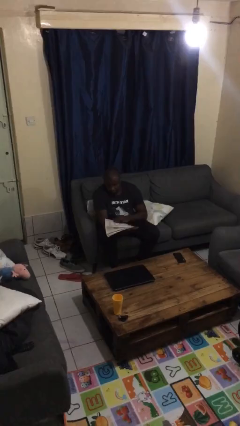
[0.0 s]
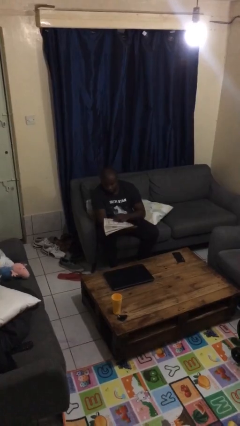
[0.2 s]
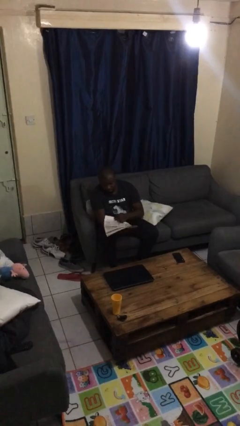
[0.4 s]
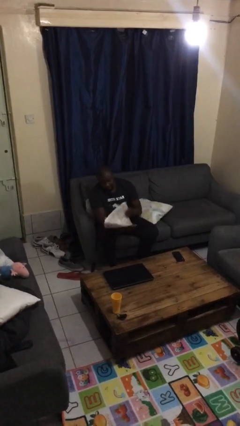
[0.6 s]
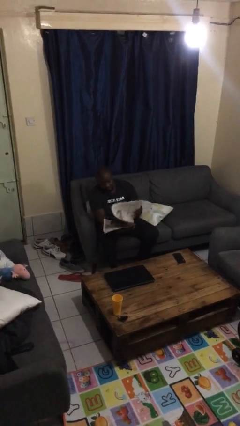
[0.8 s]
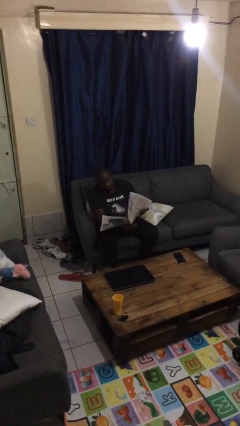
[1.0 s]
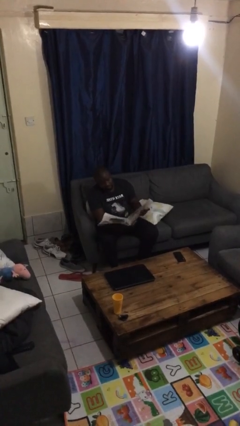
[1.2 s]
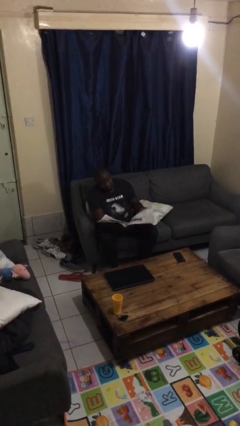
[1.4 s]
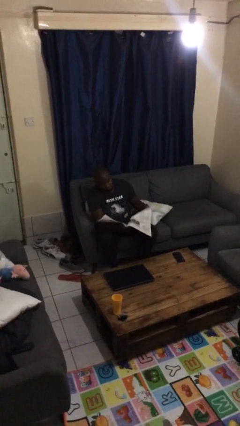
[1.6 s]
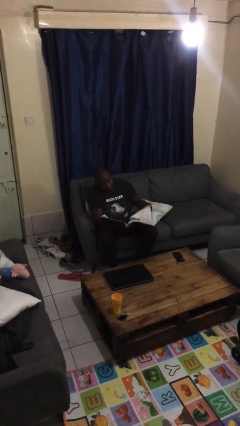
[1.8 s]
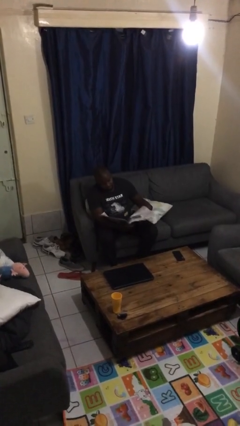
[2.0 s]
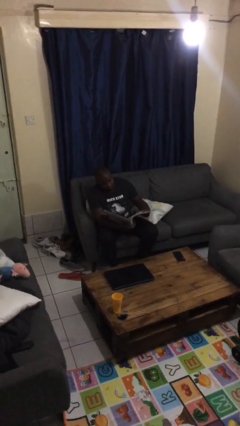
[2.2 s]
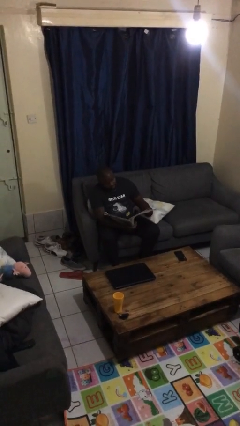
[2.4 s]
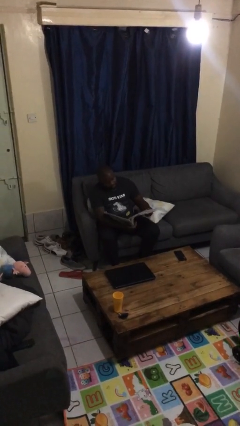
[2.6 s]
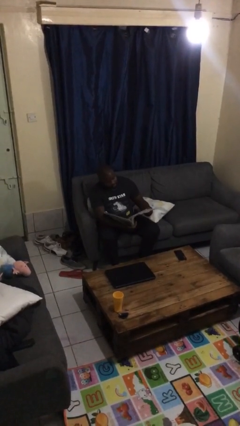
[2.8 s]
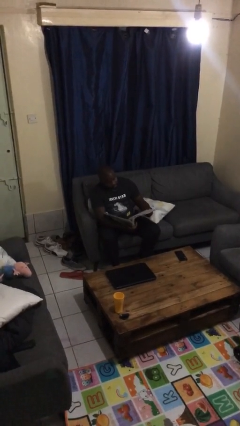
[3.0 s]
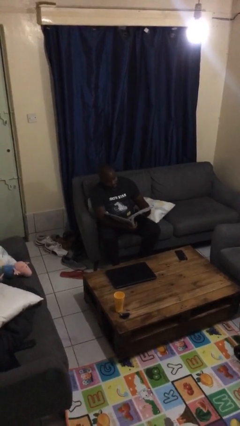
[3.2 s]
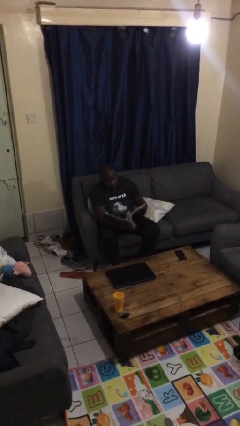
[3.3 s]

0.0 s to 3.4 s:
person reads newspaper

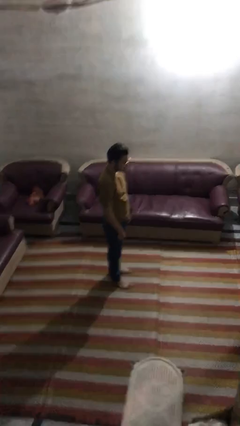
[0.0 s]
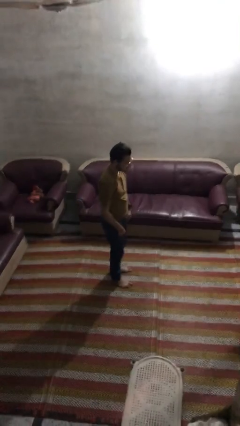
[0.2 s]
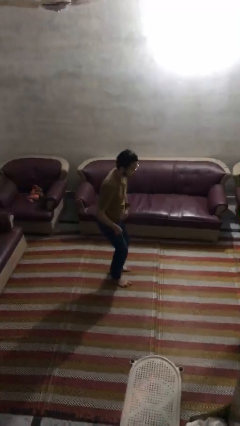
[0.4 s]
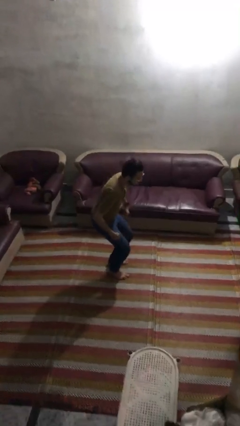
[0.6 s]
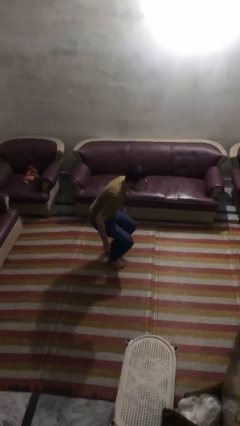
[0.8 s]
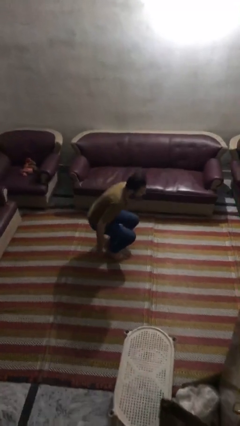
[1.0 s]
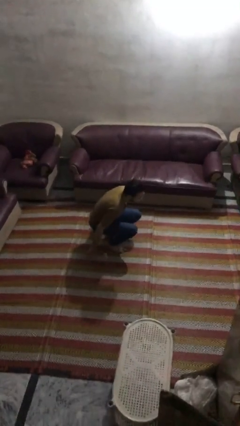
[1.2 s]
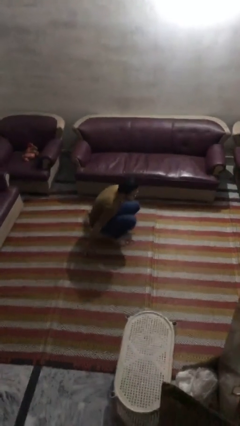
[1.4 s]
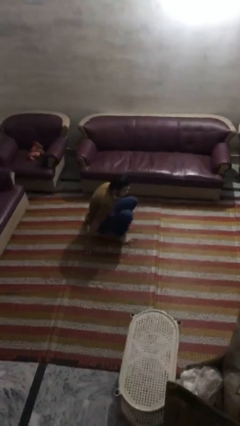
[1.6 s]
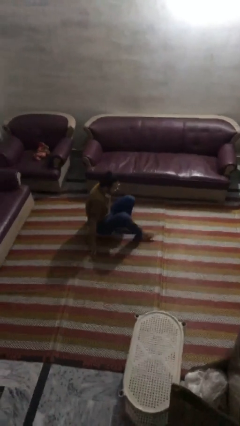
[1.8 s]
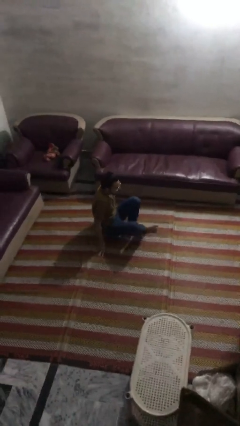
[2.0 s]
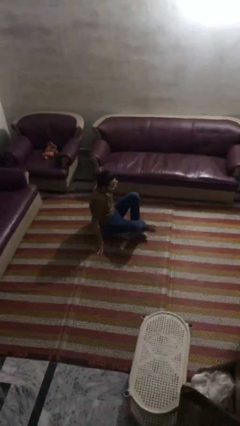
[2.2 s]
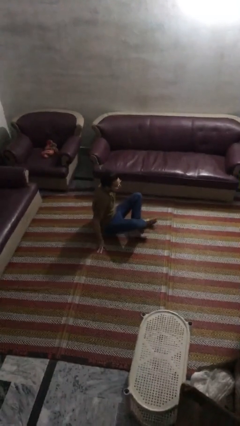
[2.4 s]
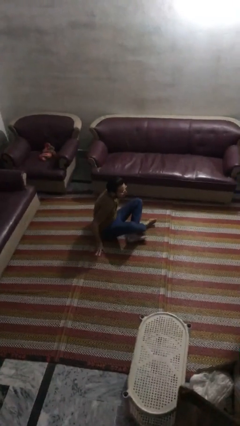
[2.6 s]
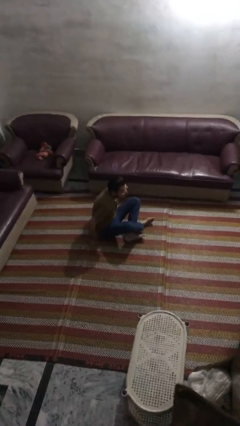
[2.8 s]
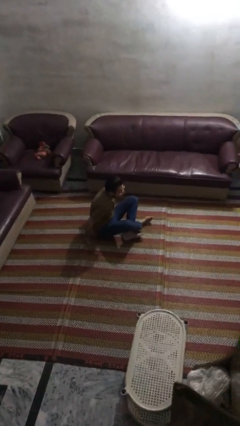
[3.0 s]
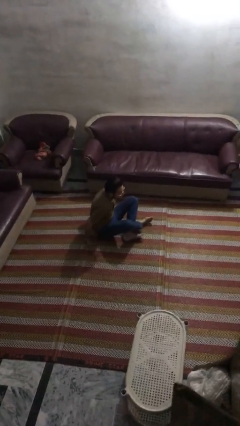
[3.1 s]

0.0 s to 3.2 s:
person sits crisscross

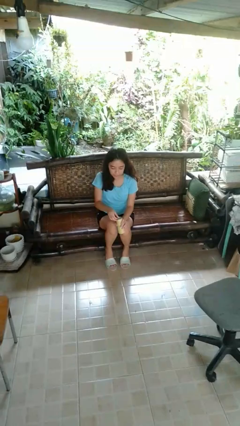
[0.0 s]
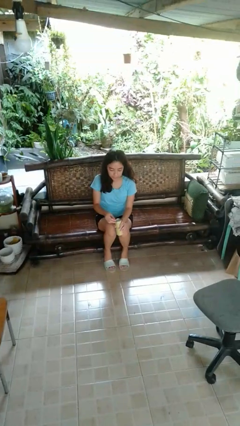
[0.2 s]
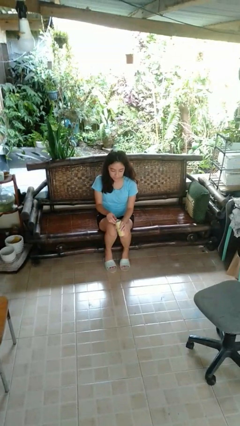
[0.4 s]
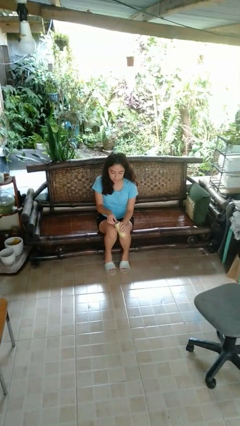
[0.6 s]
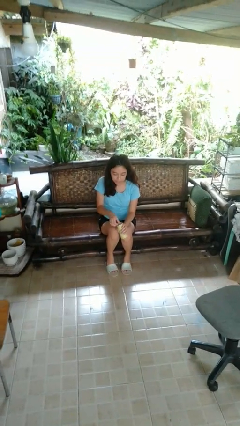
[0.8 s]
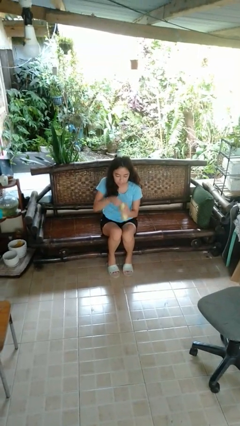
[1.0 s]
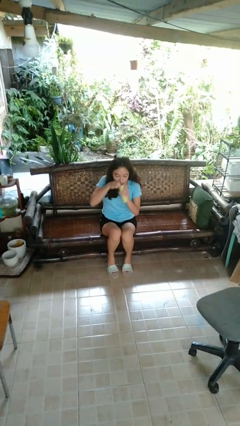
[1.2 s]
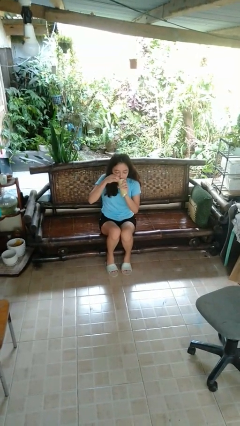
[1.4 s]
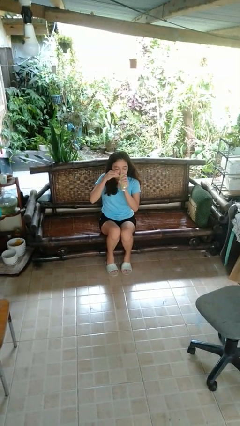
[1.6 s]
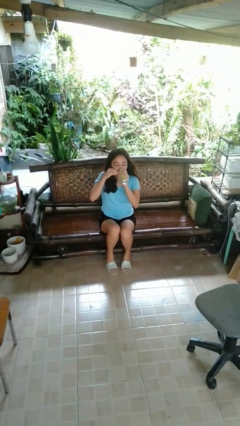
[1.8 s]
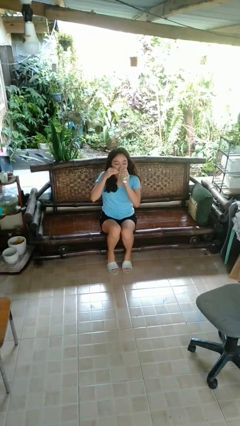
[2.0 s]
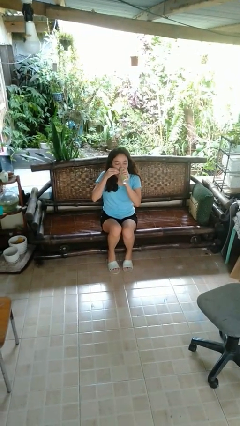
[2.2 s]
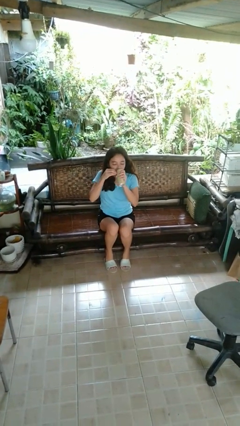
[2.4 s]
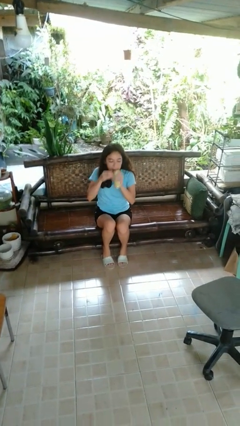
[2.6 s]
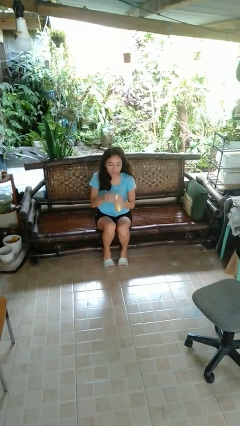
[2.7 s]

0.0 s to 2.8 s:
person drinks from beverage can

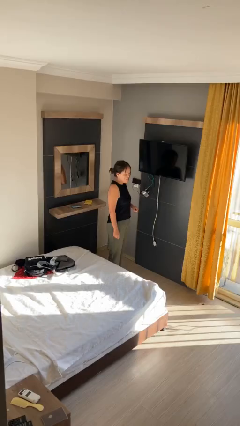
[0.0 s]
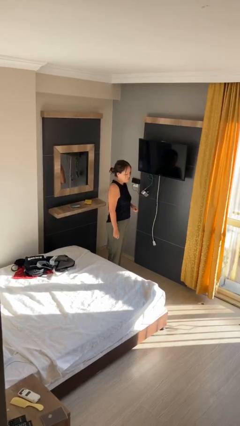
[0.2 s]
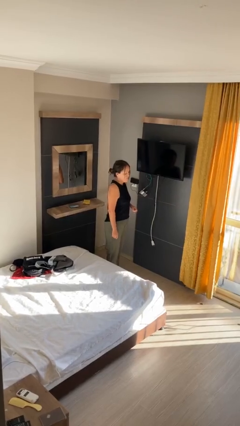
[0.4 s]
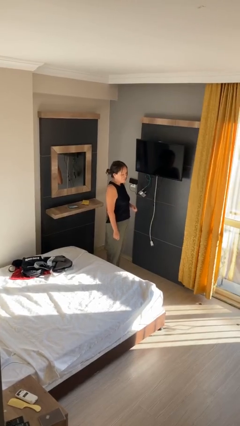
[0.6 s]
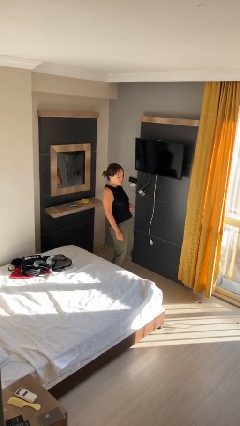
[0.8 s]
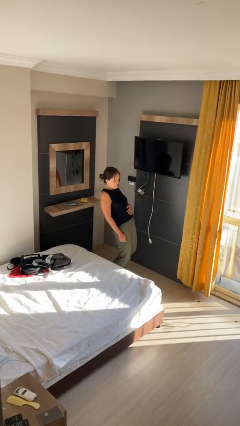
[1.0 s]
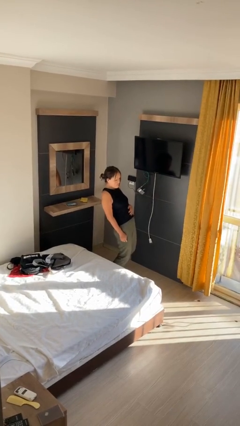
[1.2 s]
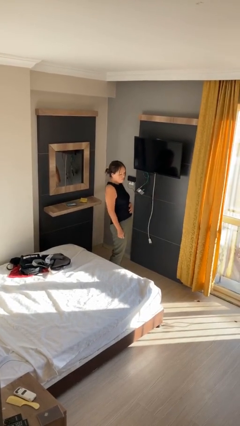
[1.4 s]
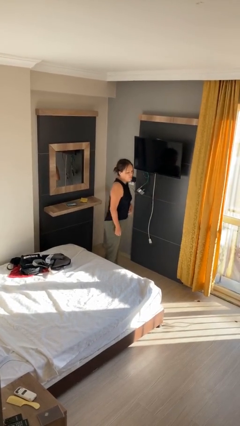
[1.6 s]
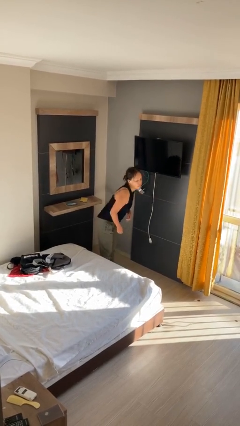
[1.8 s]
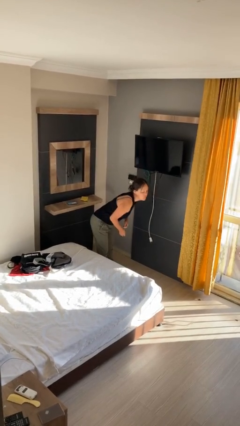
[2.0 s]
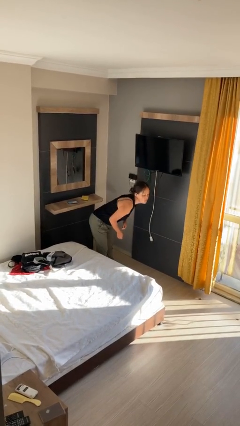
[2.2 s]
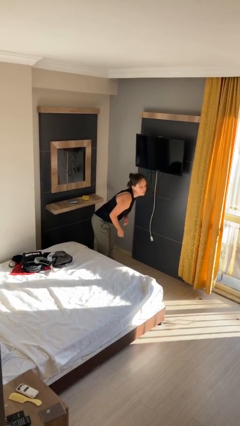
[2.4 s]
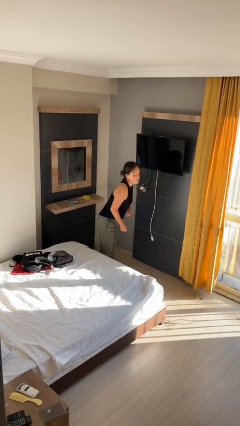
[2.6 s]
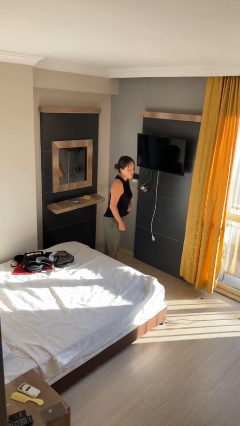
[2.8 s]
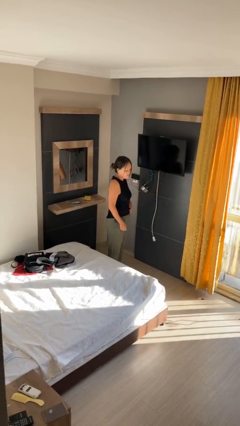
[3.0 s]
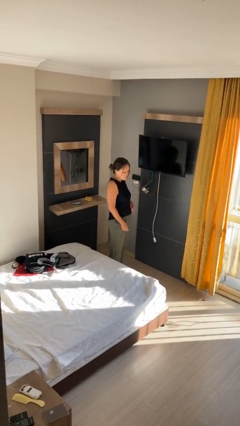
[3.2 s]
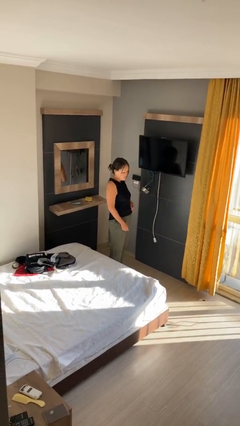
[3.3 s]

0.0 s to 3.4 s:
person wiggles hips

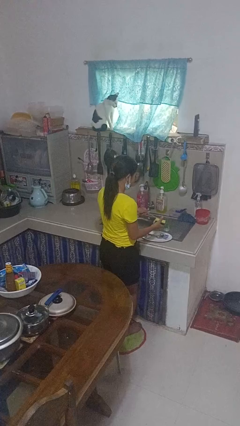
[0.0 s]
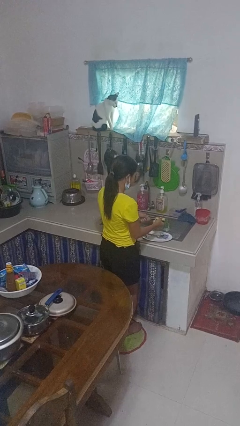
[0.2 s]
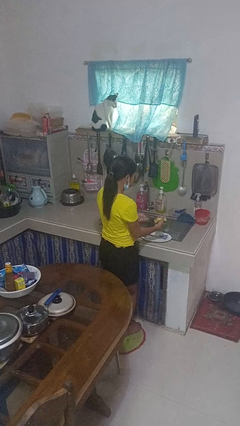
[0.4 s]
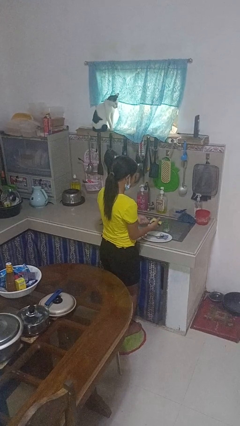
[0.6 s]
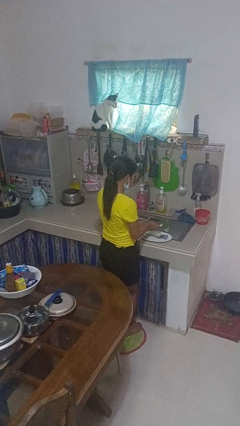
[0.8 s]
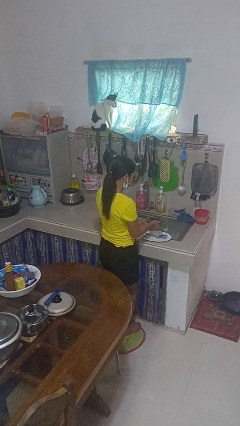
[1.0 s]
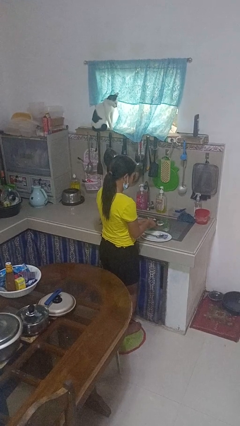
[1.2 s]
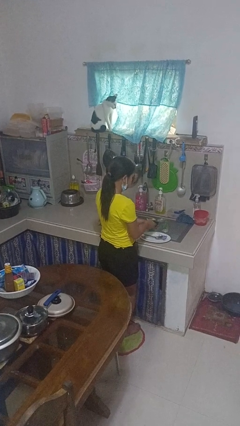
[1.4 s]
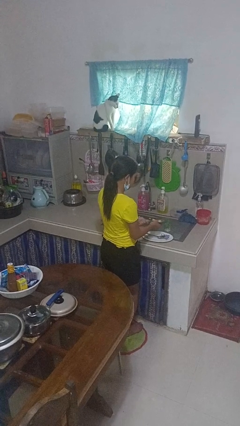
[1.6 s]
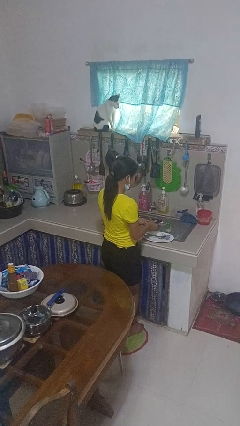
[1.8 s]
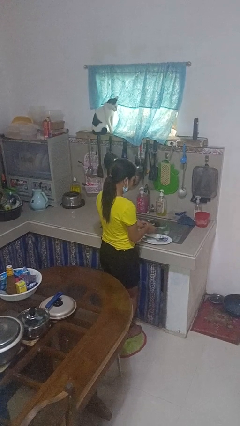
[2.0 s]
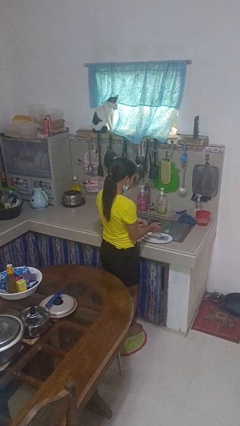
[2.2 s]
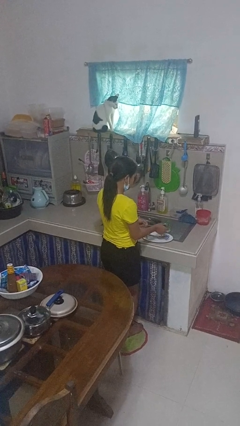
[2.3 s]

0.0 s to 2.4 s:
person washes dish

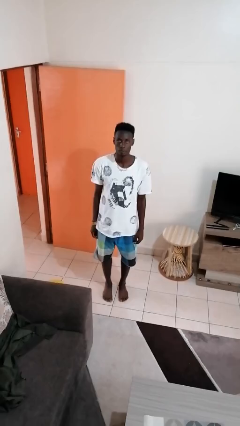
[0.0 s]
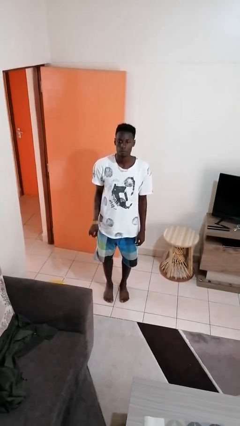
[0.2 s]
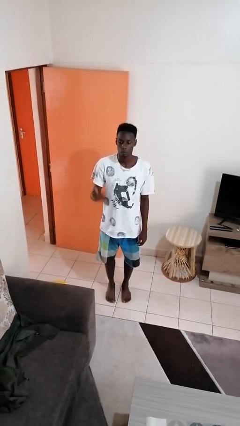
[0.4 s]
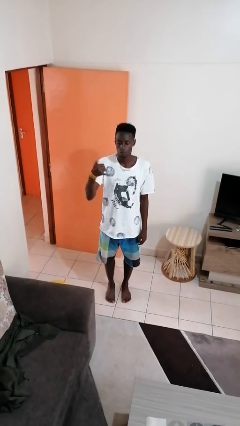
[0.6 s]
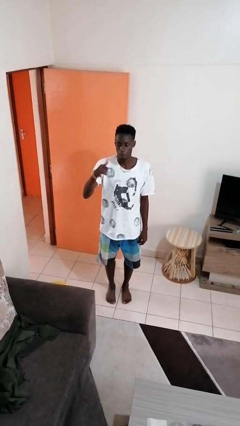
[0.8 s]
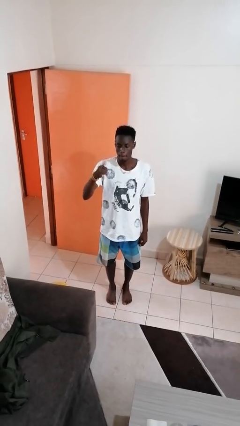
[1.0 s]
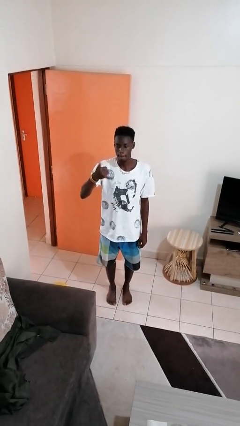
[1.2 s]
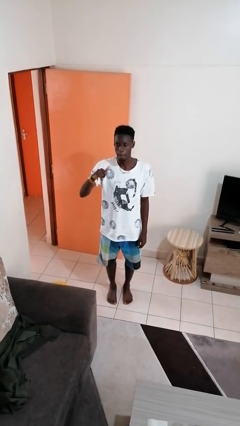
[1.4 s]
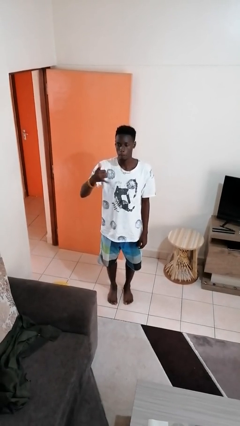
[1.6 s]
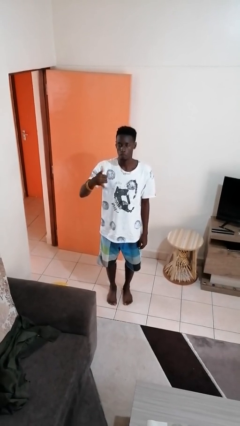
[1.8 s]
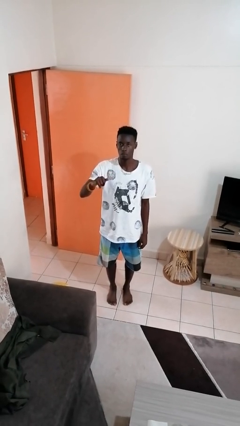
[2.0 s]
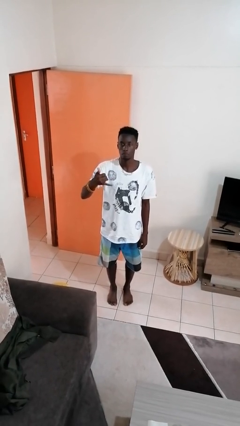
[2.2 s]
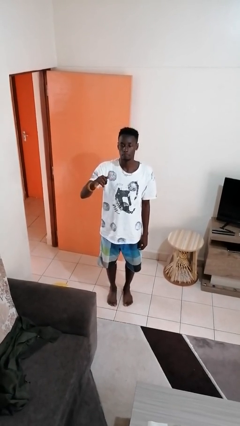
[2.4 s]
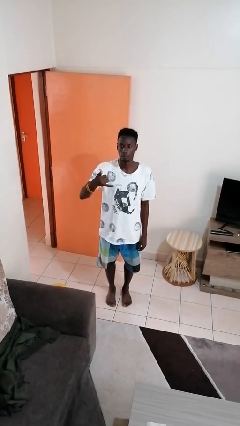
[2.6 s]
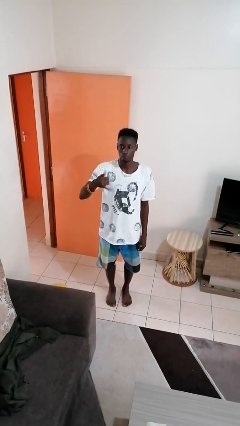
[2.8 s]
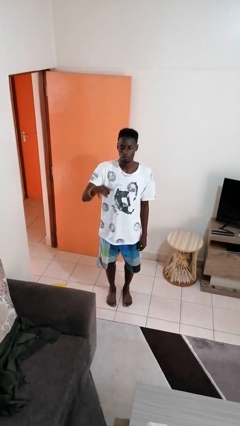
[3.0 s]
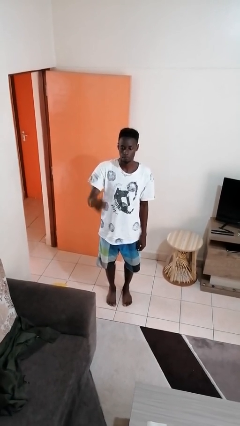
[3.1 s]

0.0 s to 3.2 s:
person gestures hang loose
